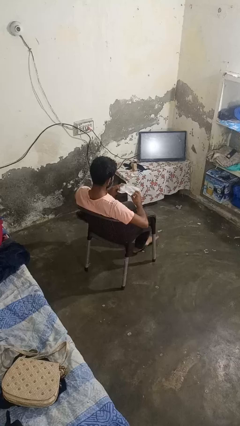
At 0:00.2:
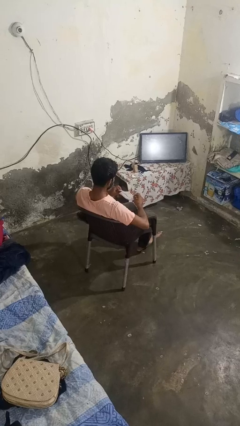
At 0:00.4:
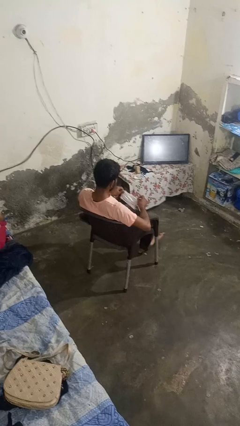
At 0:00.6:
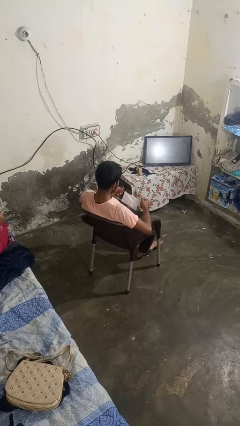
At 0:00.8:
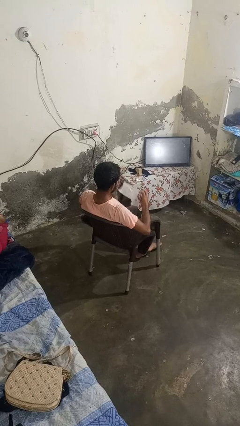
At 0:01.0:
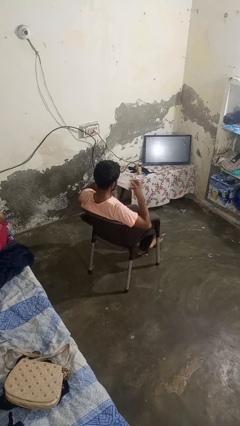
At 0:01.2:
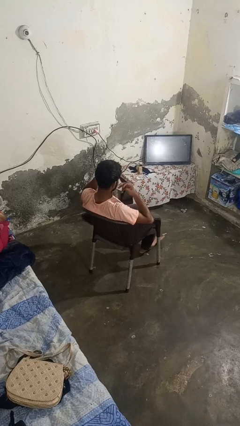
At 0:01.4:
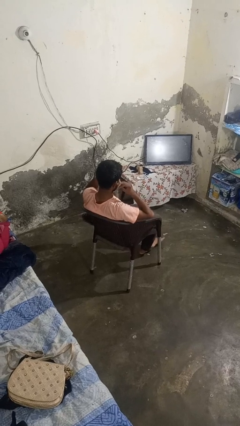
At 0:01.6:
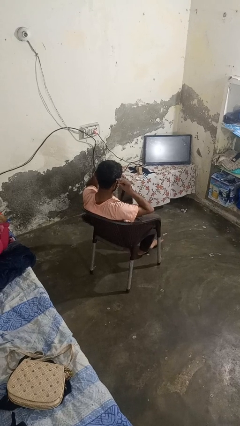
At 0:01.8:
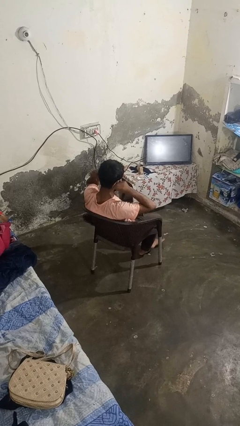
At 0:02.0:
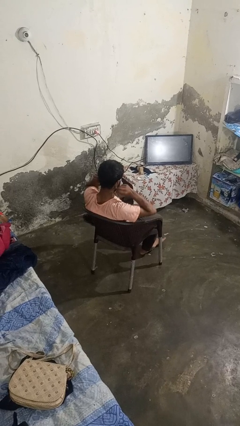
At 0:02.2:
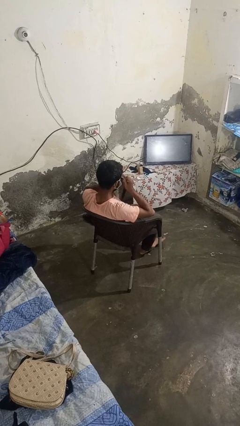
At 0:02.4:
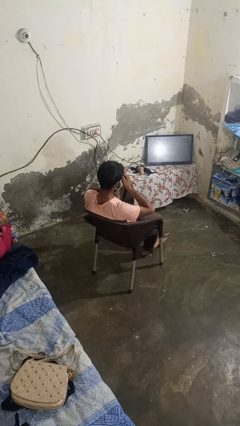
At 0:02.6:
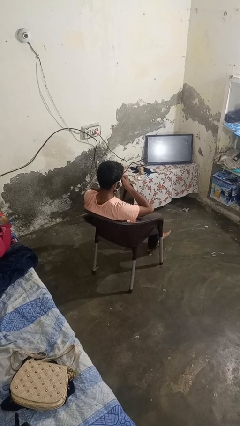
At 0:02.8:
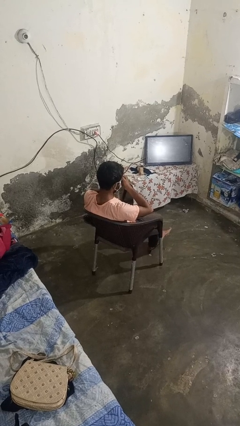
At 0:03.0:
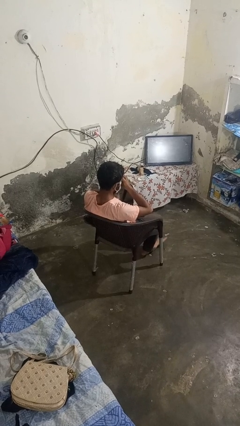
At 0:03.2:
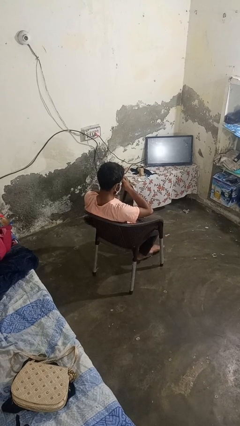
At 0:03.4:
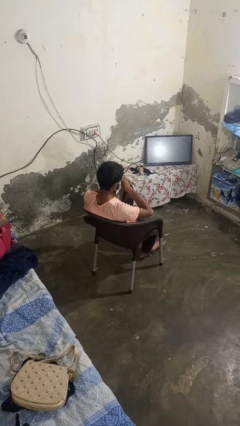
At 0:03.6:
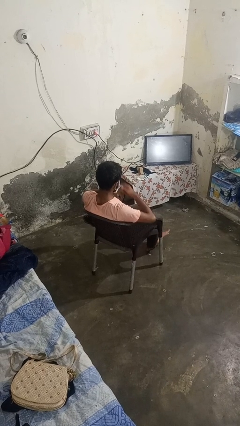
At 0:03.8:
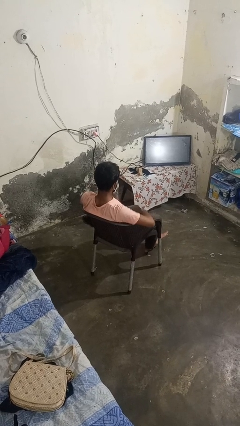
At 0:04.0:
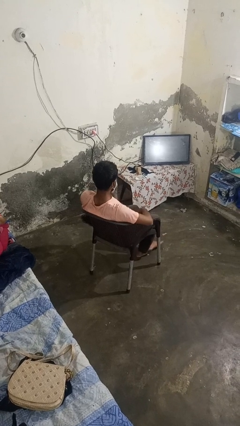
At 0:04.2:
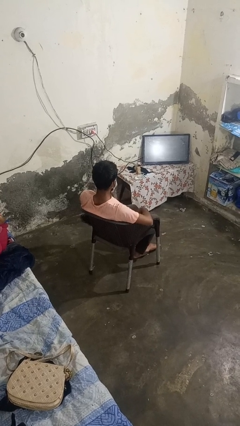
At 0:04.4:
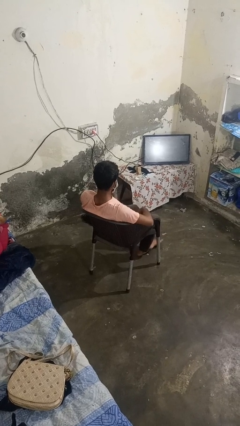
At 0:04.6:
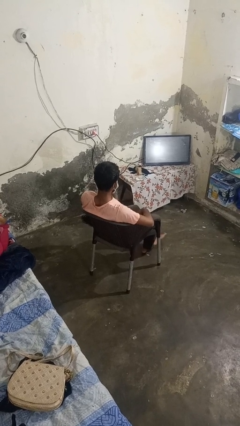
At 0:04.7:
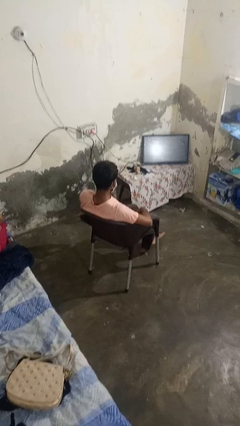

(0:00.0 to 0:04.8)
person puts on facemask

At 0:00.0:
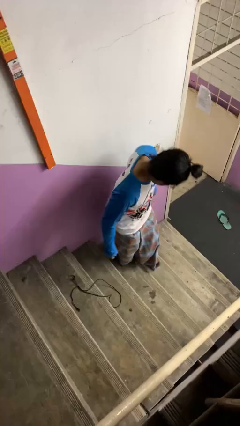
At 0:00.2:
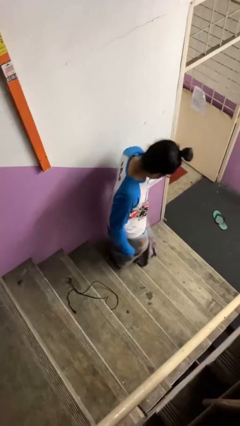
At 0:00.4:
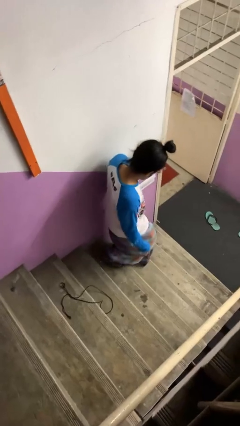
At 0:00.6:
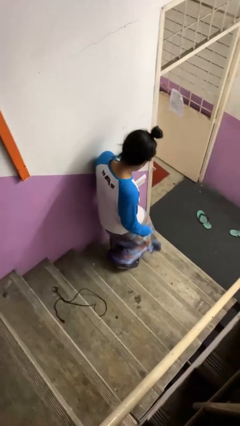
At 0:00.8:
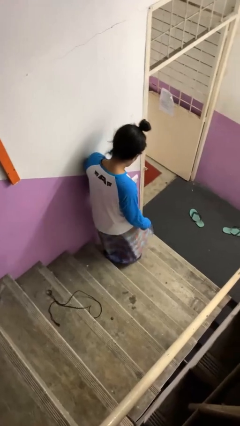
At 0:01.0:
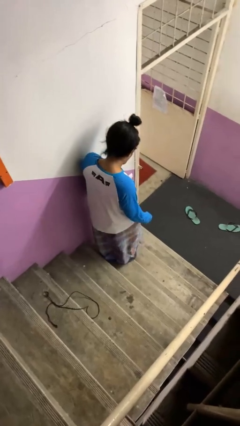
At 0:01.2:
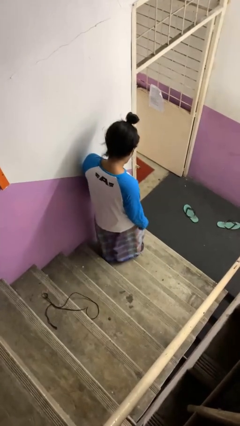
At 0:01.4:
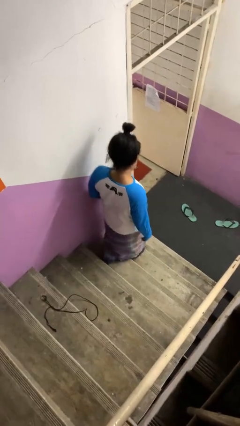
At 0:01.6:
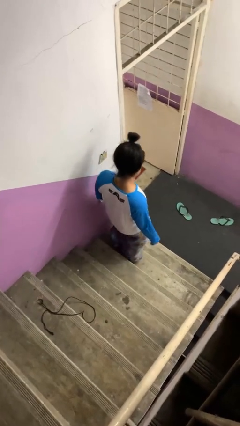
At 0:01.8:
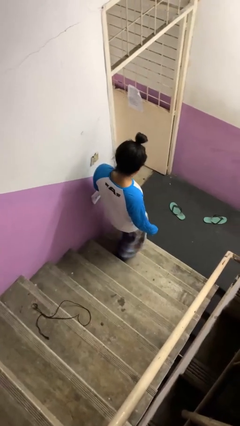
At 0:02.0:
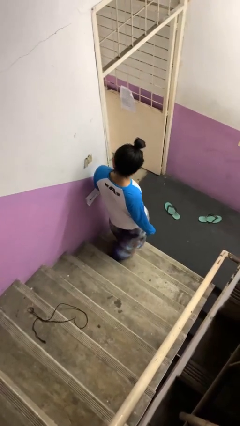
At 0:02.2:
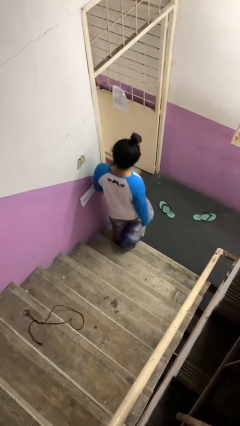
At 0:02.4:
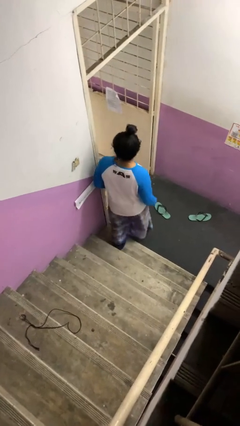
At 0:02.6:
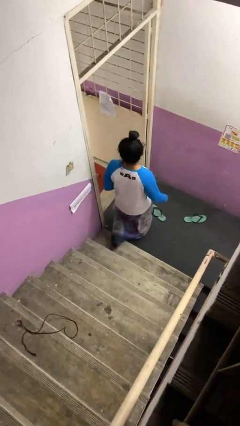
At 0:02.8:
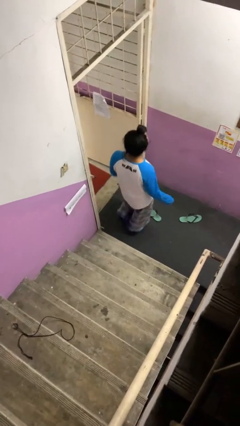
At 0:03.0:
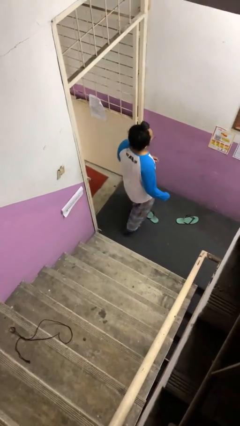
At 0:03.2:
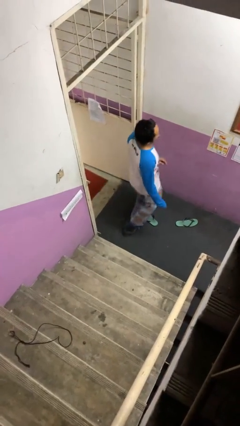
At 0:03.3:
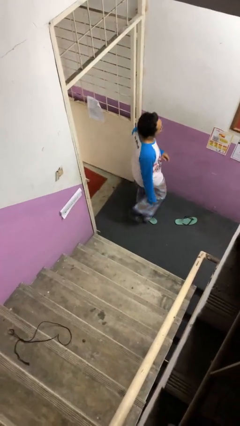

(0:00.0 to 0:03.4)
person climbs down stairs

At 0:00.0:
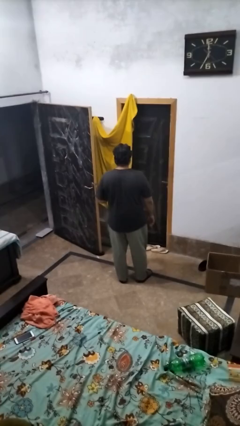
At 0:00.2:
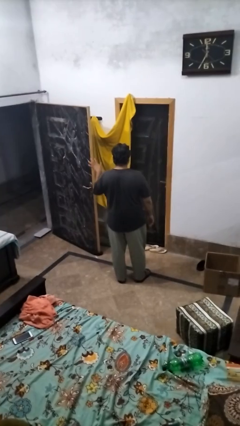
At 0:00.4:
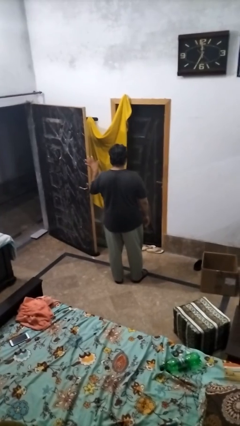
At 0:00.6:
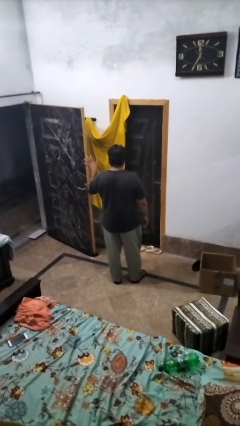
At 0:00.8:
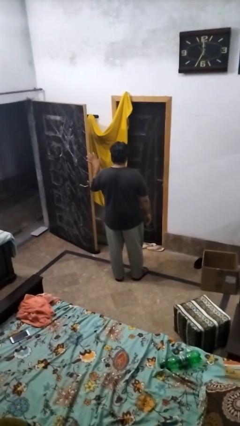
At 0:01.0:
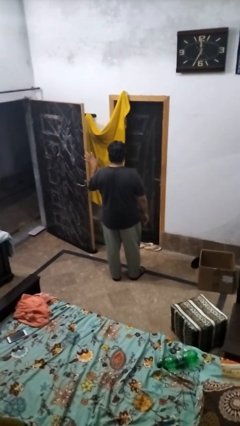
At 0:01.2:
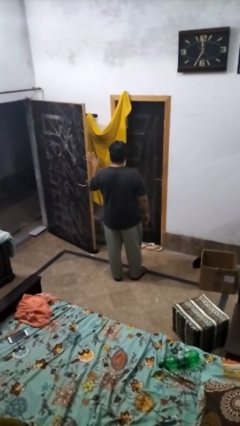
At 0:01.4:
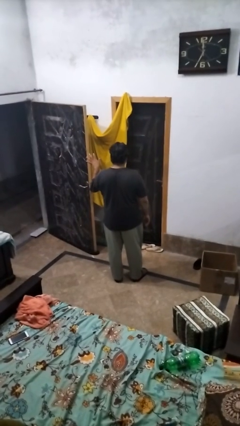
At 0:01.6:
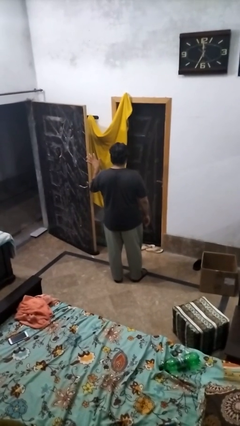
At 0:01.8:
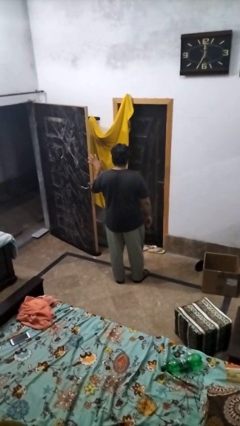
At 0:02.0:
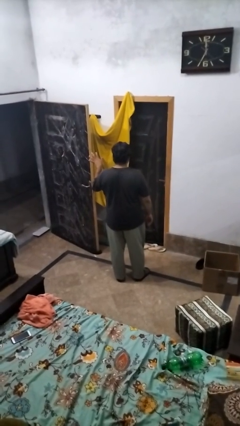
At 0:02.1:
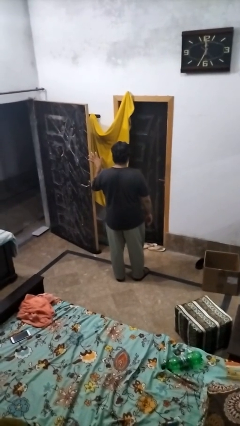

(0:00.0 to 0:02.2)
person gestures stop

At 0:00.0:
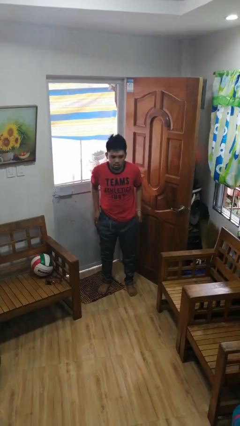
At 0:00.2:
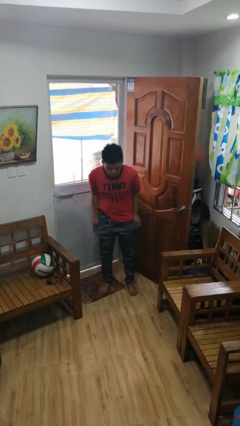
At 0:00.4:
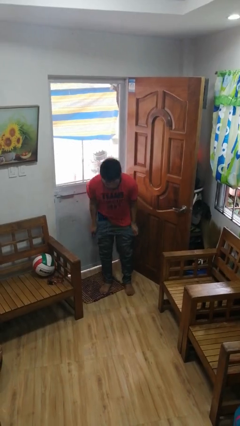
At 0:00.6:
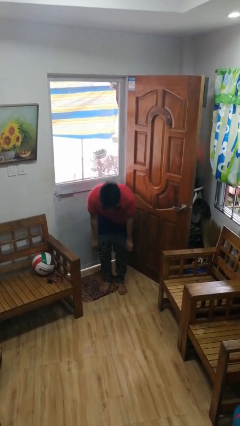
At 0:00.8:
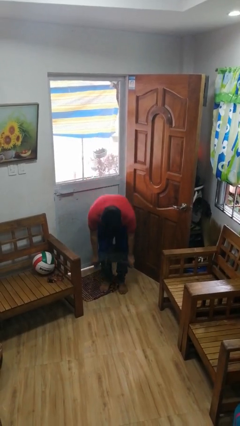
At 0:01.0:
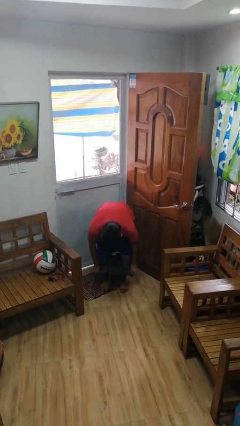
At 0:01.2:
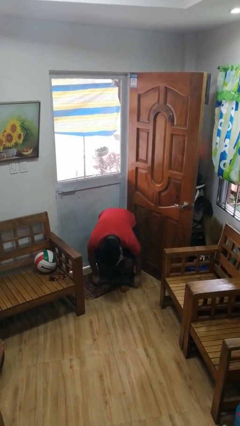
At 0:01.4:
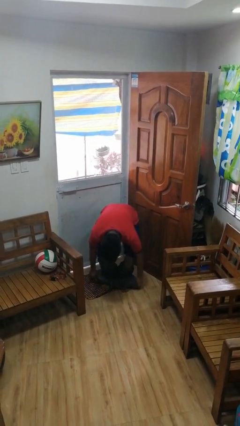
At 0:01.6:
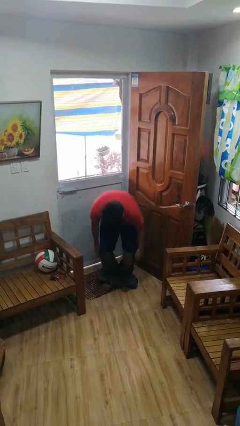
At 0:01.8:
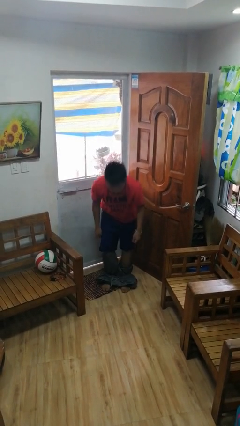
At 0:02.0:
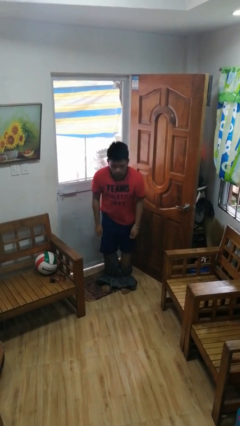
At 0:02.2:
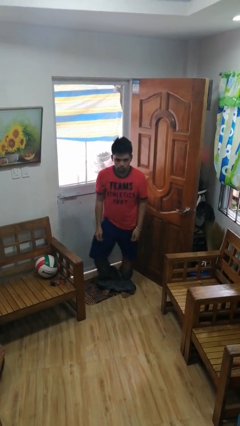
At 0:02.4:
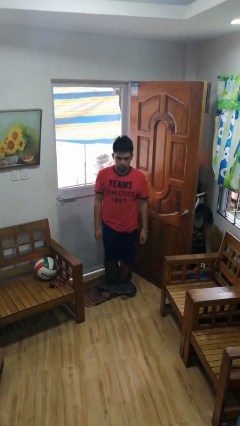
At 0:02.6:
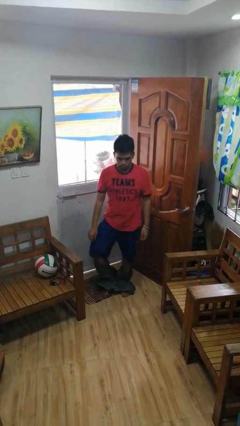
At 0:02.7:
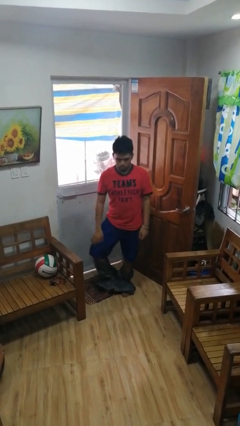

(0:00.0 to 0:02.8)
person takes off pants

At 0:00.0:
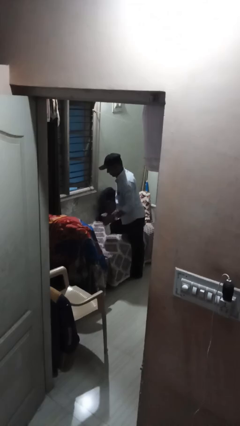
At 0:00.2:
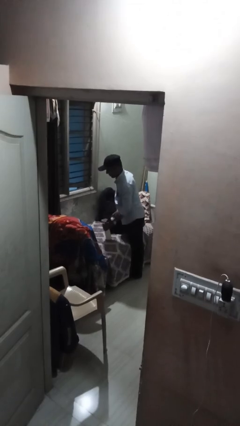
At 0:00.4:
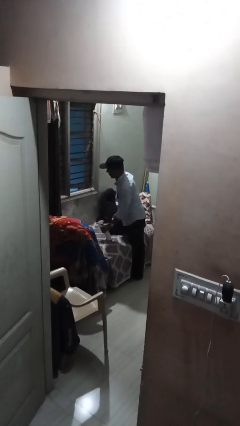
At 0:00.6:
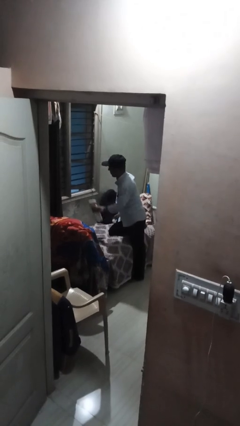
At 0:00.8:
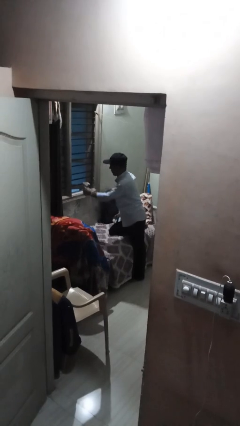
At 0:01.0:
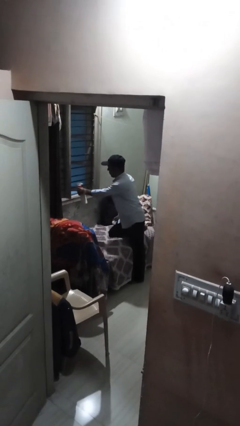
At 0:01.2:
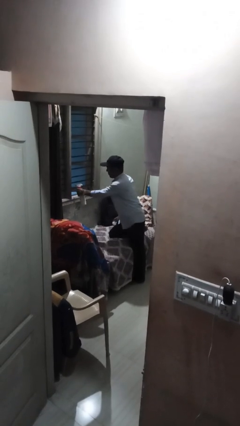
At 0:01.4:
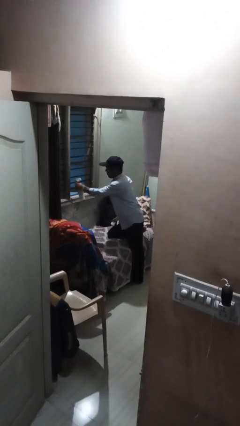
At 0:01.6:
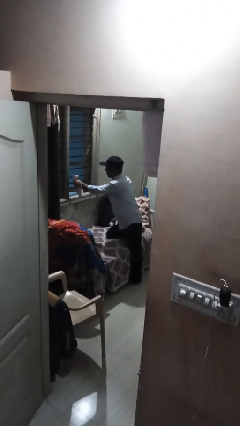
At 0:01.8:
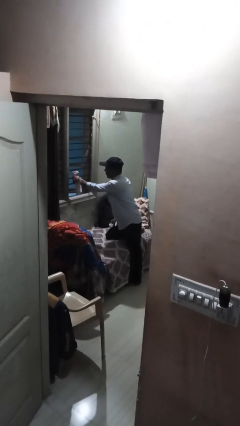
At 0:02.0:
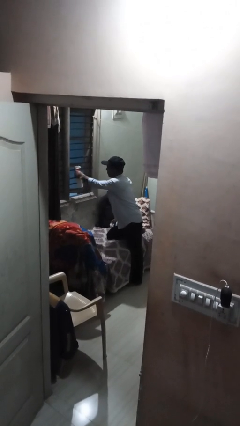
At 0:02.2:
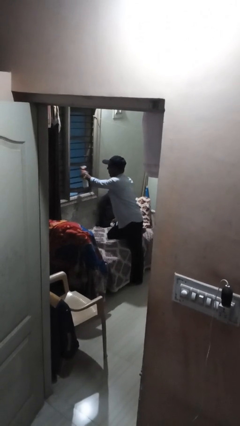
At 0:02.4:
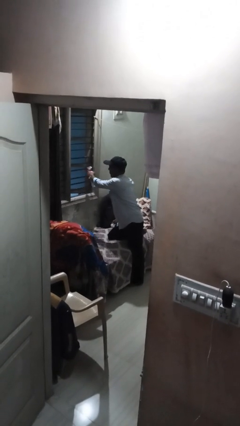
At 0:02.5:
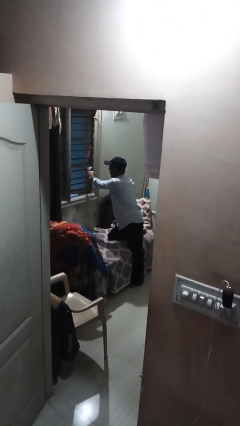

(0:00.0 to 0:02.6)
person sprays from bottle

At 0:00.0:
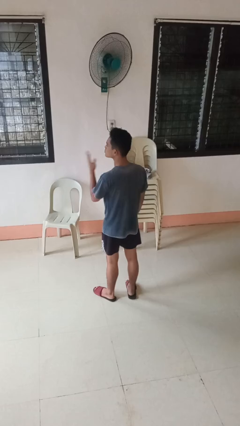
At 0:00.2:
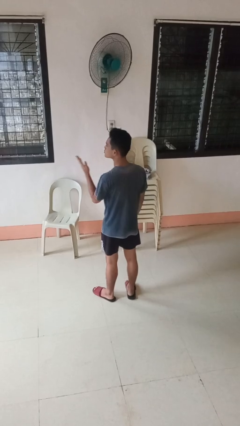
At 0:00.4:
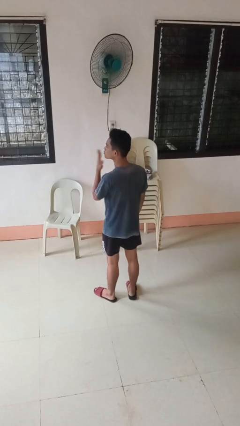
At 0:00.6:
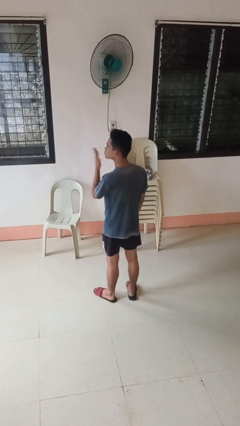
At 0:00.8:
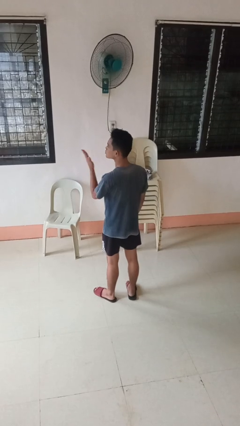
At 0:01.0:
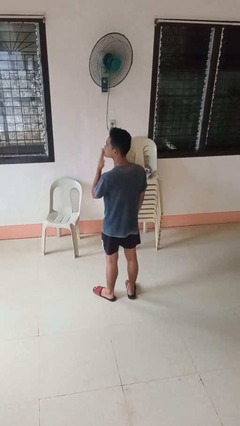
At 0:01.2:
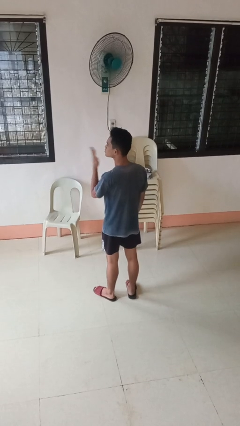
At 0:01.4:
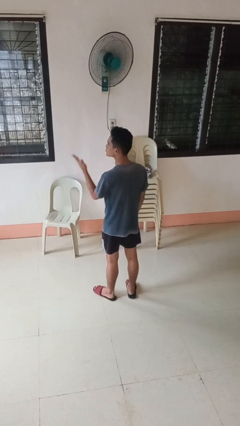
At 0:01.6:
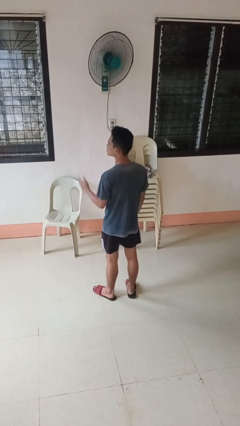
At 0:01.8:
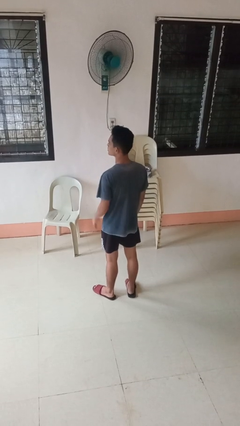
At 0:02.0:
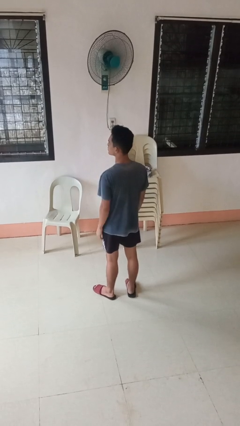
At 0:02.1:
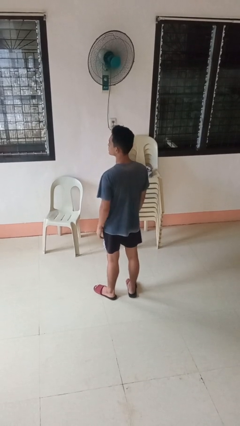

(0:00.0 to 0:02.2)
person gestures blow kiss
